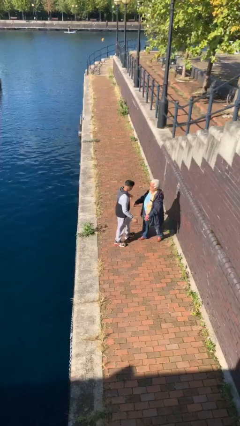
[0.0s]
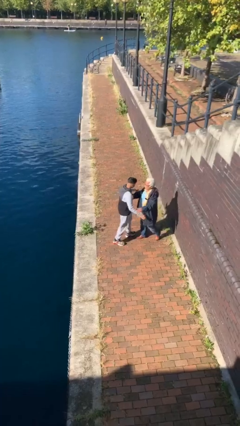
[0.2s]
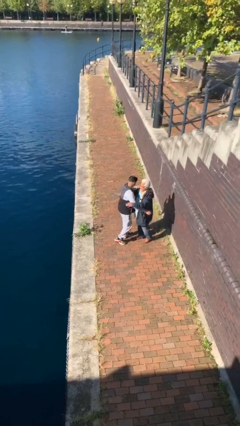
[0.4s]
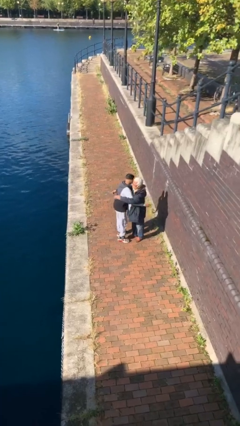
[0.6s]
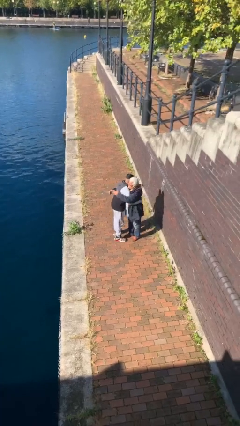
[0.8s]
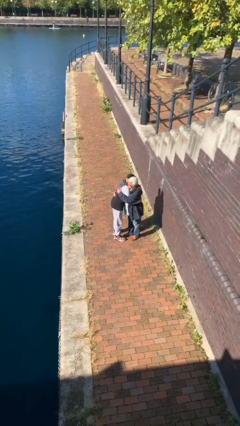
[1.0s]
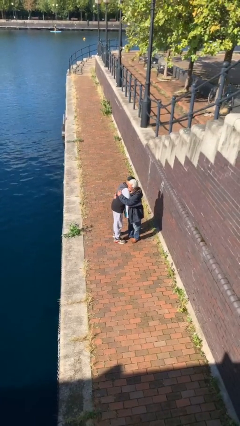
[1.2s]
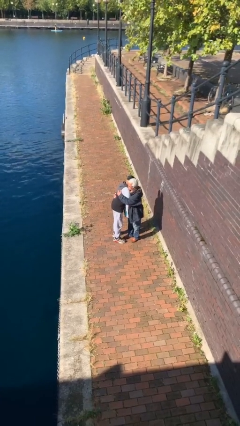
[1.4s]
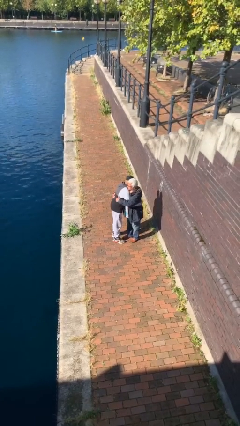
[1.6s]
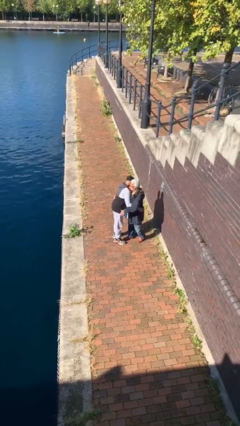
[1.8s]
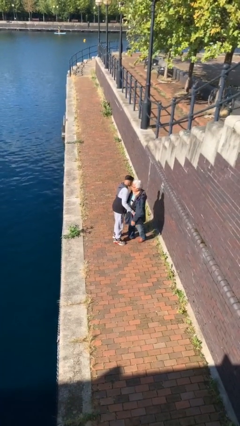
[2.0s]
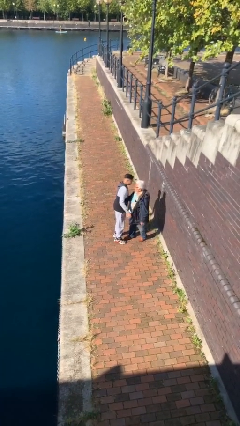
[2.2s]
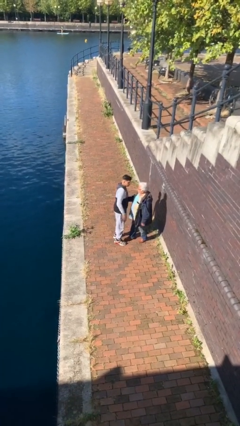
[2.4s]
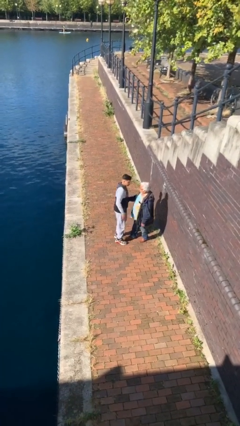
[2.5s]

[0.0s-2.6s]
person embraces person

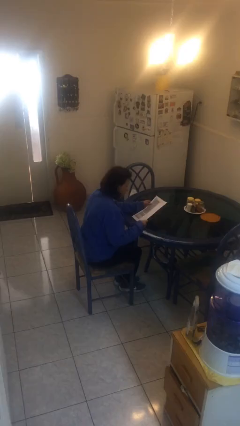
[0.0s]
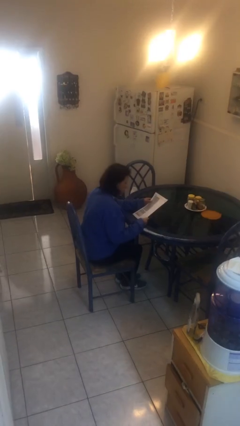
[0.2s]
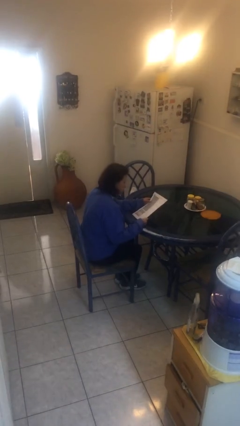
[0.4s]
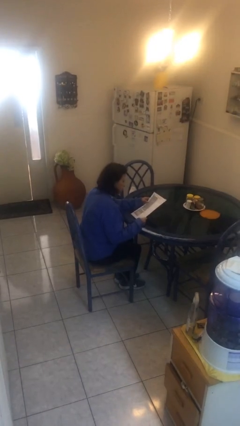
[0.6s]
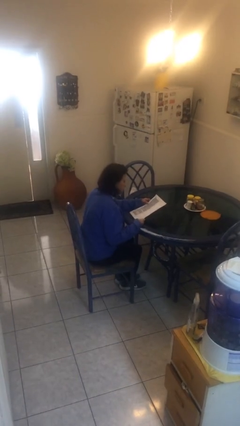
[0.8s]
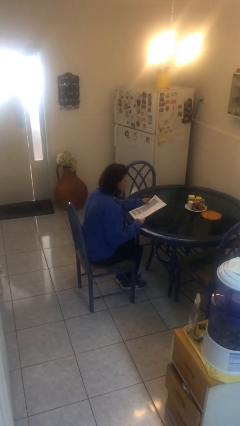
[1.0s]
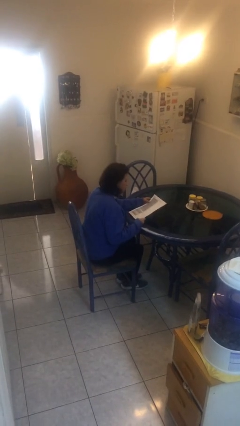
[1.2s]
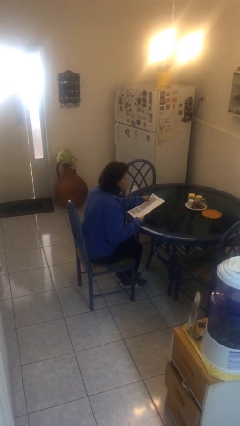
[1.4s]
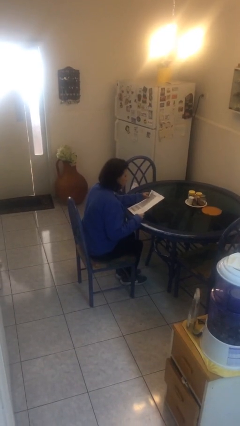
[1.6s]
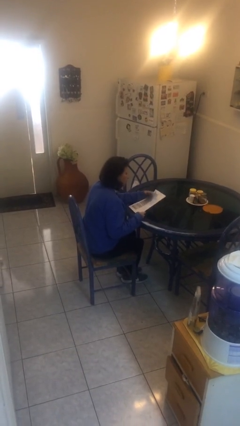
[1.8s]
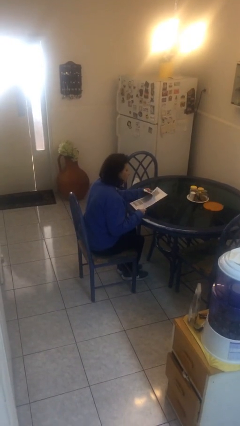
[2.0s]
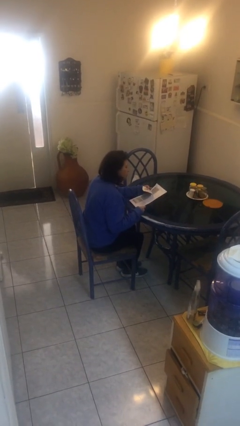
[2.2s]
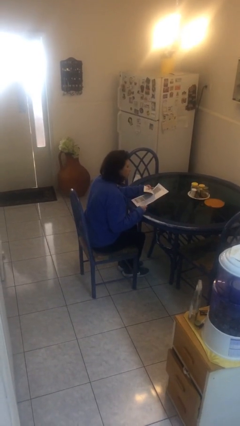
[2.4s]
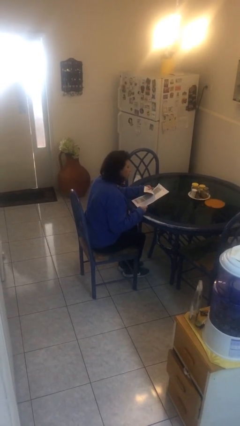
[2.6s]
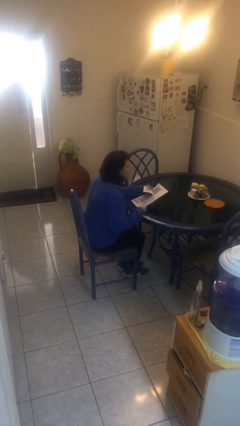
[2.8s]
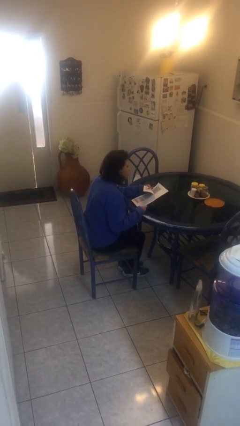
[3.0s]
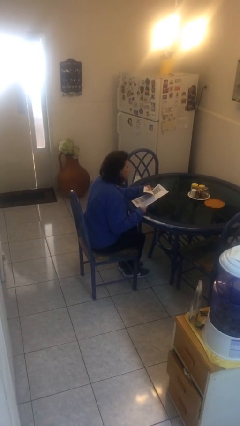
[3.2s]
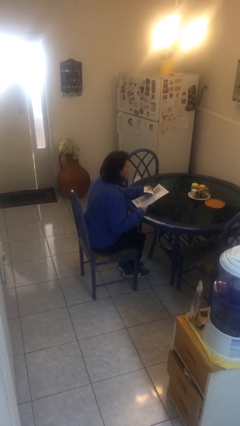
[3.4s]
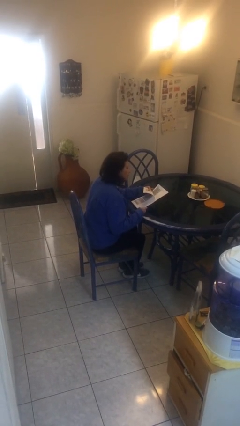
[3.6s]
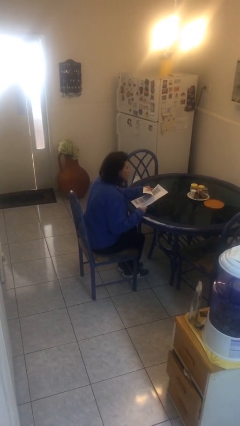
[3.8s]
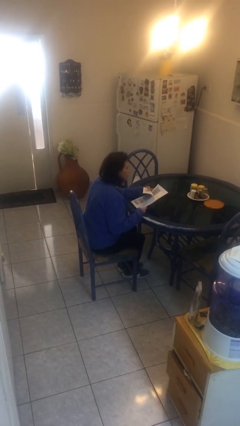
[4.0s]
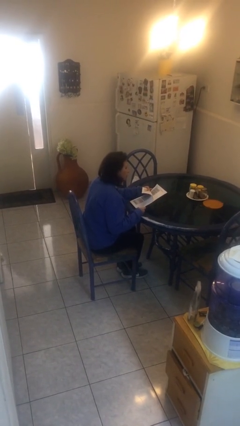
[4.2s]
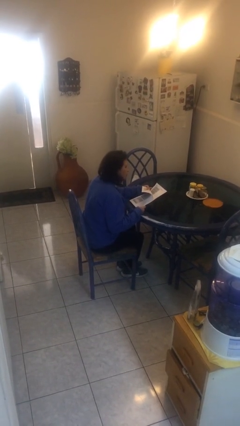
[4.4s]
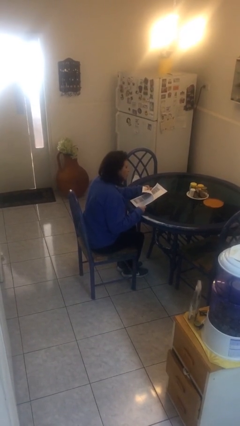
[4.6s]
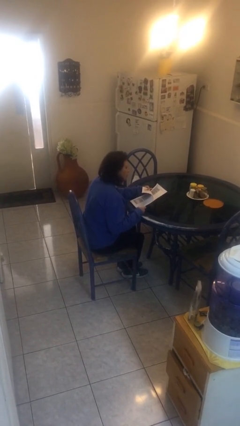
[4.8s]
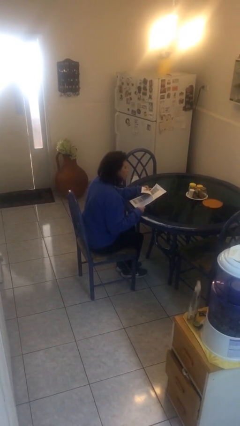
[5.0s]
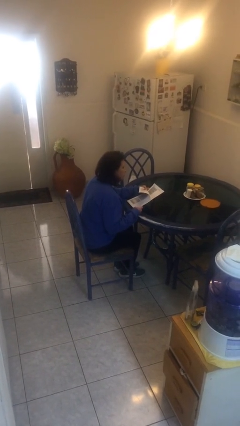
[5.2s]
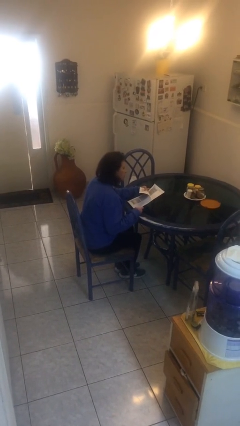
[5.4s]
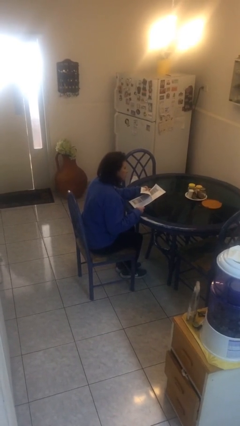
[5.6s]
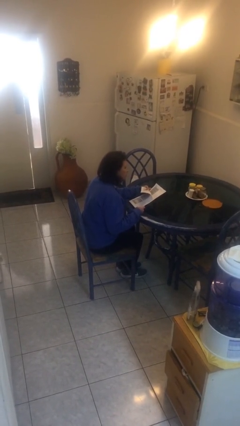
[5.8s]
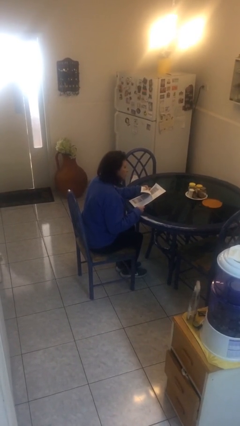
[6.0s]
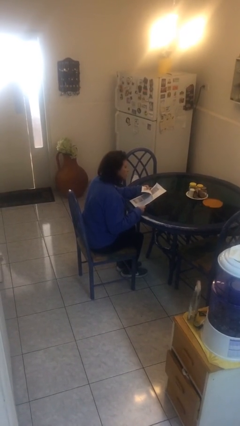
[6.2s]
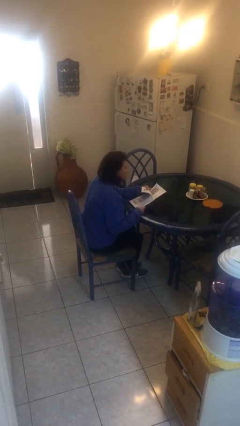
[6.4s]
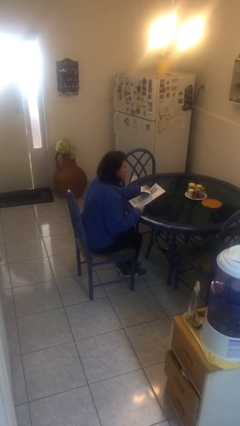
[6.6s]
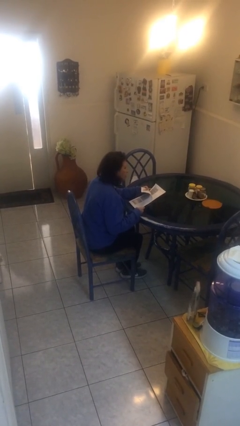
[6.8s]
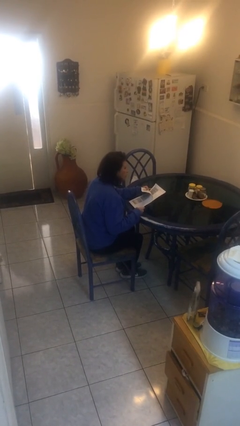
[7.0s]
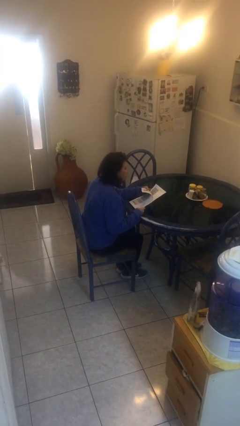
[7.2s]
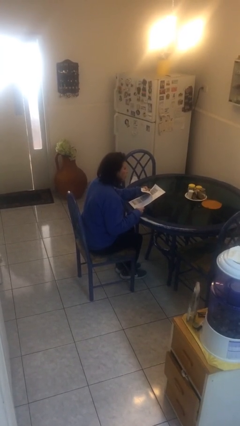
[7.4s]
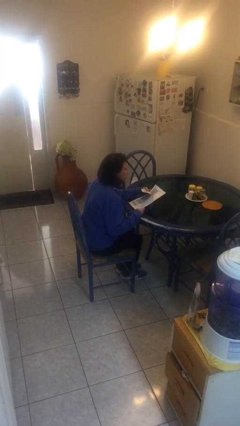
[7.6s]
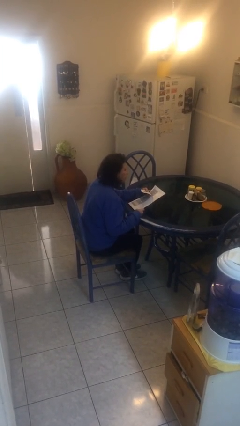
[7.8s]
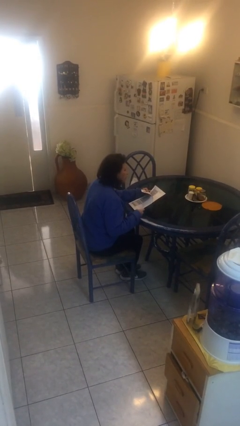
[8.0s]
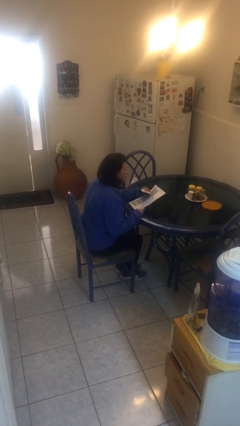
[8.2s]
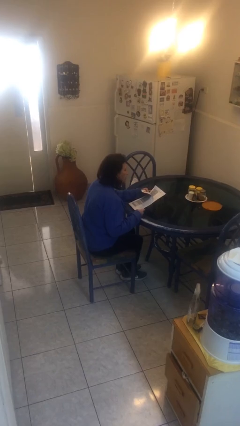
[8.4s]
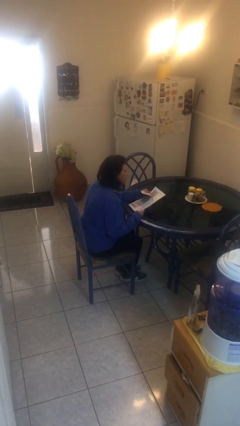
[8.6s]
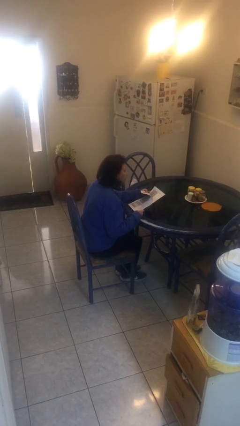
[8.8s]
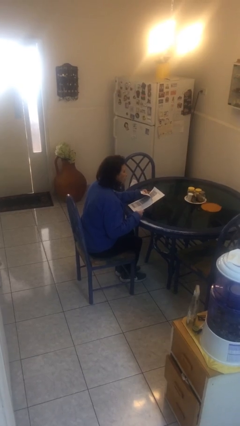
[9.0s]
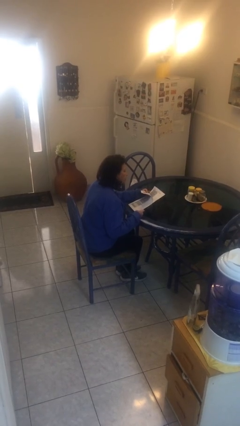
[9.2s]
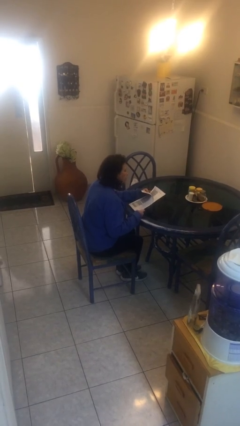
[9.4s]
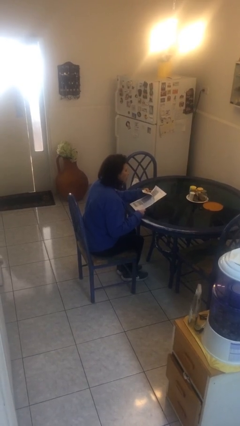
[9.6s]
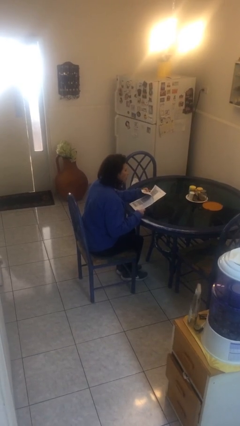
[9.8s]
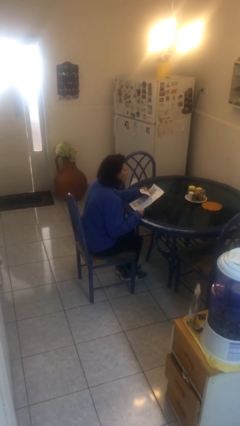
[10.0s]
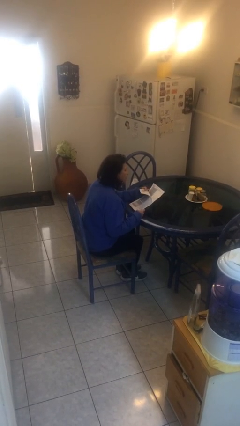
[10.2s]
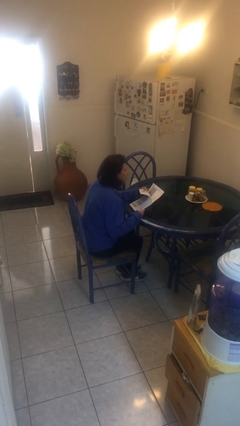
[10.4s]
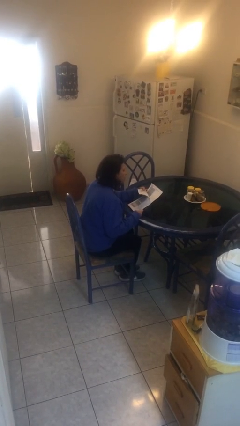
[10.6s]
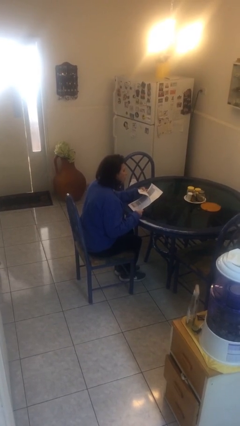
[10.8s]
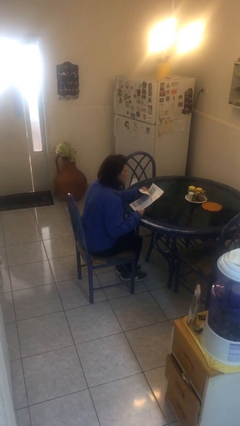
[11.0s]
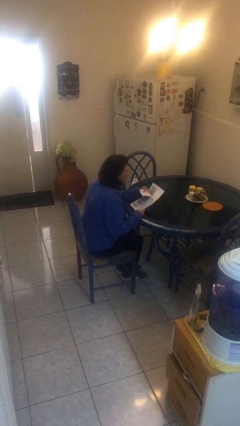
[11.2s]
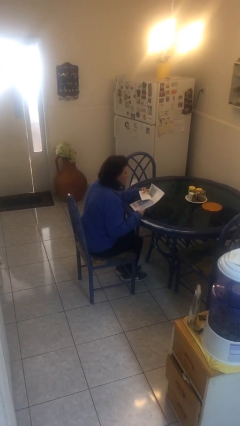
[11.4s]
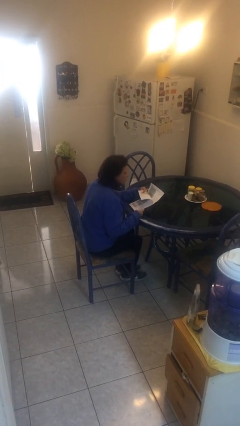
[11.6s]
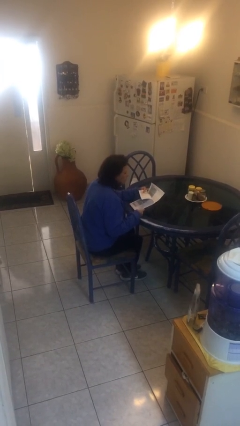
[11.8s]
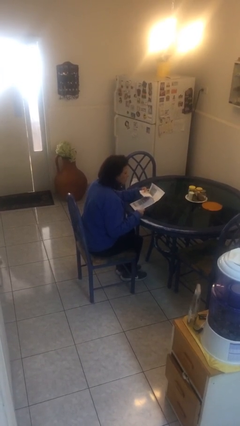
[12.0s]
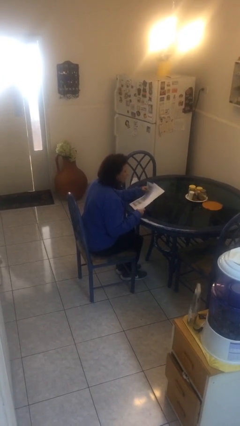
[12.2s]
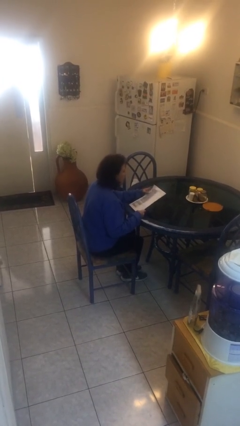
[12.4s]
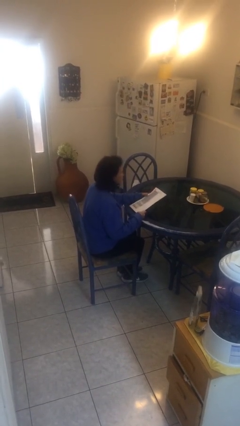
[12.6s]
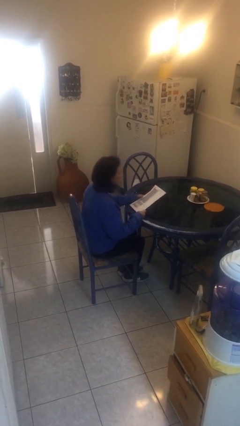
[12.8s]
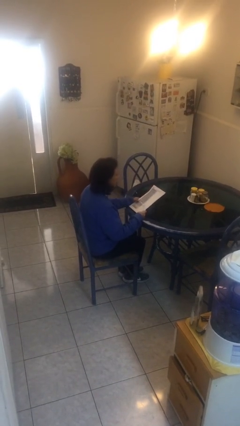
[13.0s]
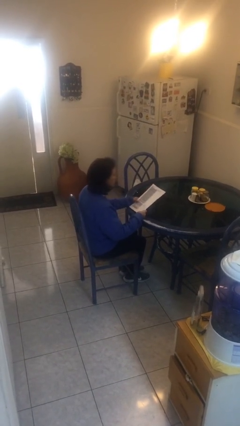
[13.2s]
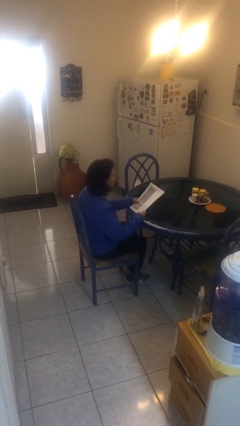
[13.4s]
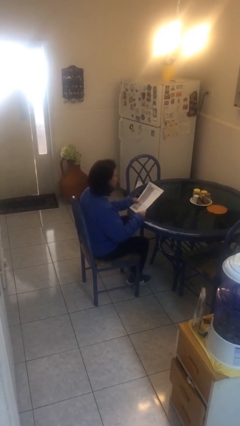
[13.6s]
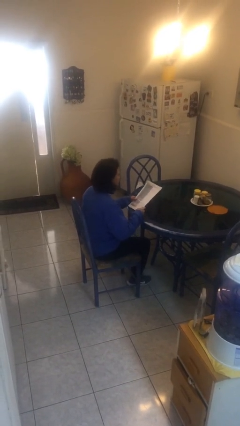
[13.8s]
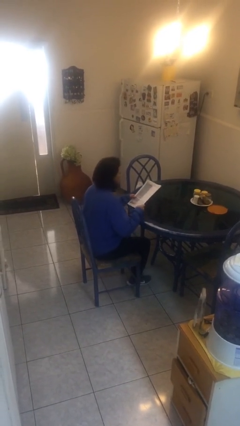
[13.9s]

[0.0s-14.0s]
person reads document

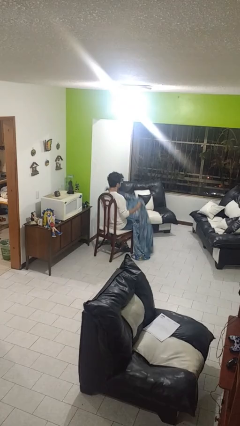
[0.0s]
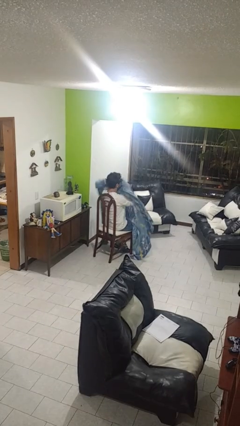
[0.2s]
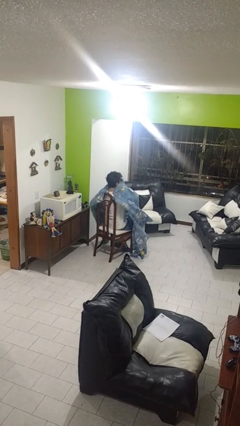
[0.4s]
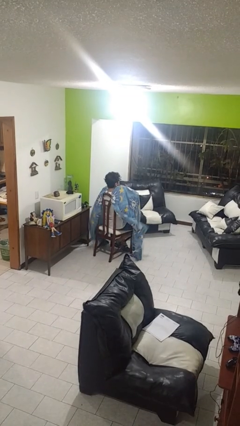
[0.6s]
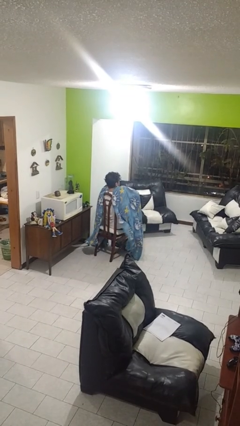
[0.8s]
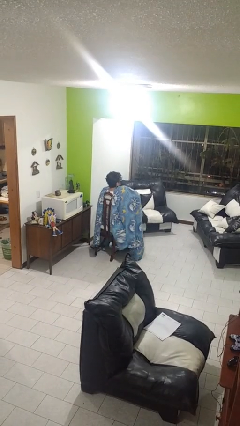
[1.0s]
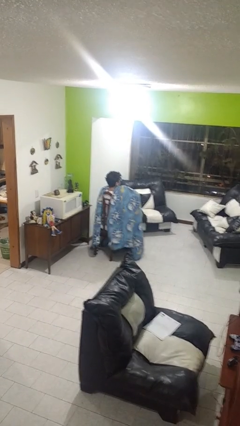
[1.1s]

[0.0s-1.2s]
person covers with blanket
